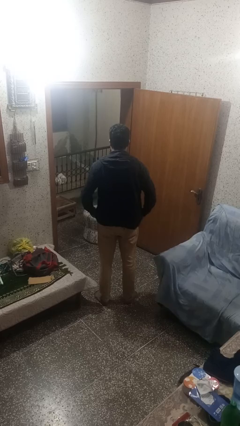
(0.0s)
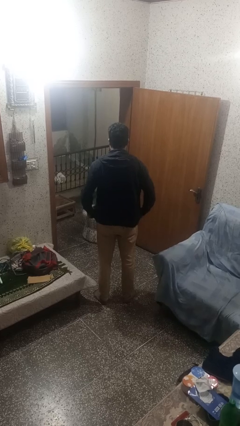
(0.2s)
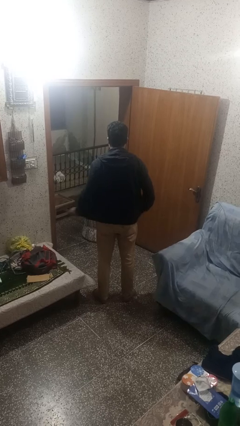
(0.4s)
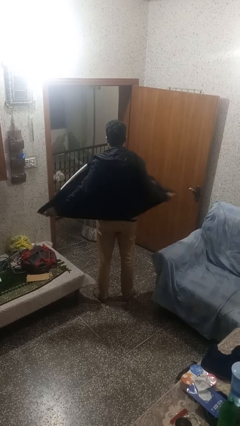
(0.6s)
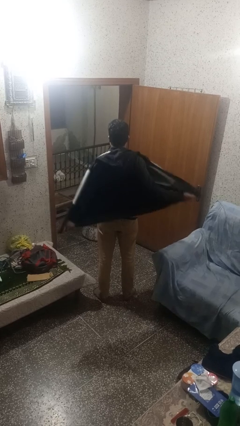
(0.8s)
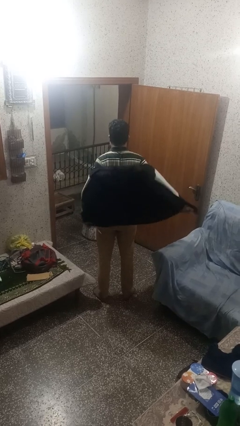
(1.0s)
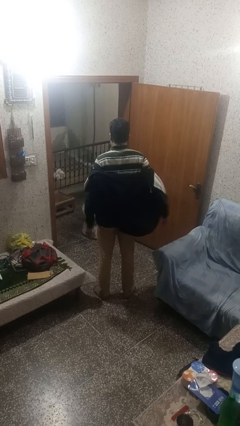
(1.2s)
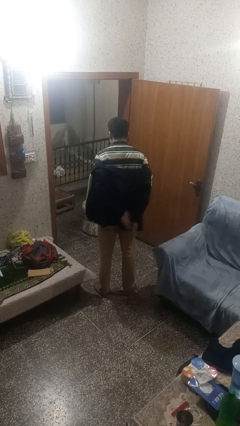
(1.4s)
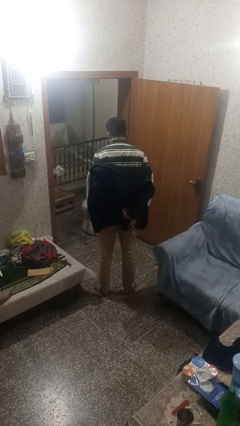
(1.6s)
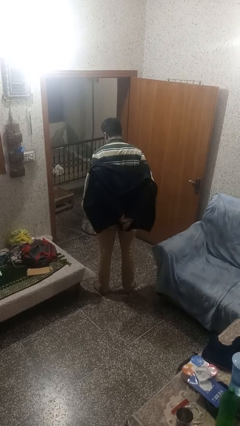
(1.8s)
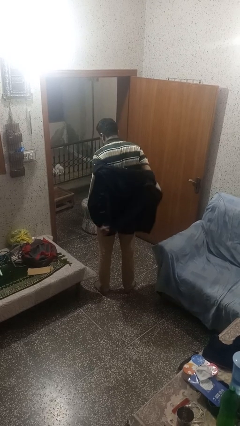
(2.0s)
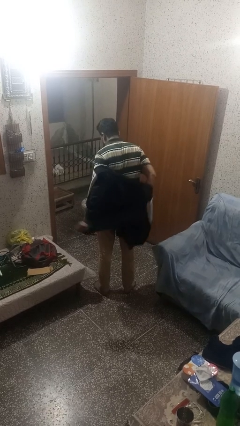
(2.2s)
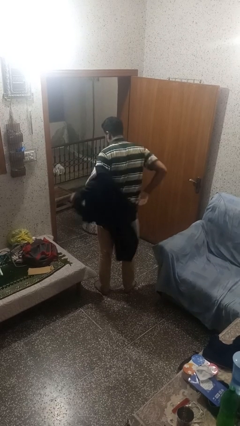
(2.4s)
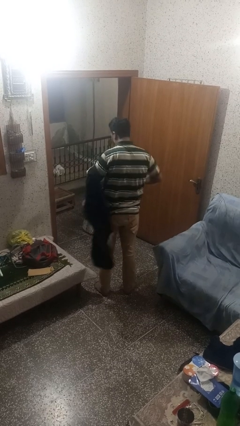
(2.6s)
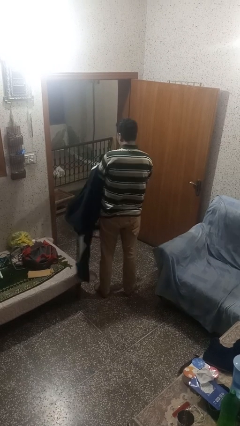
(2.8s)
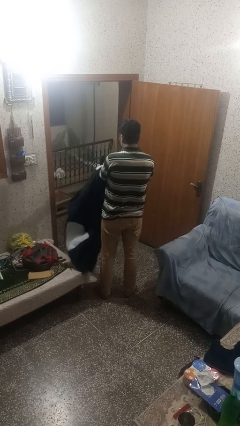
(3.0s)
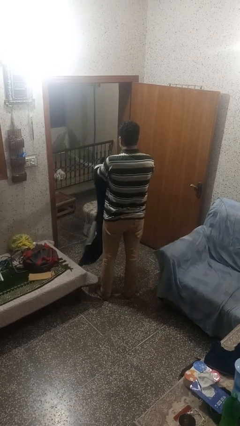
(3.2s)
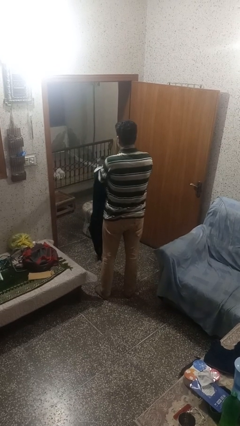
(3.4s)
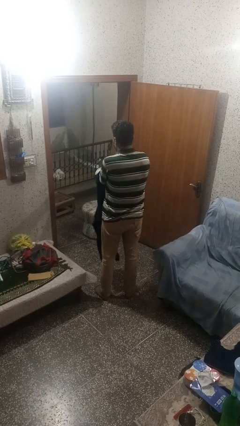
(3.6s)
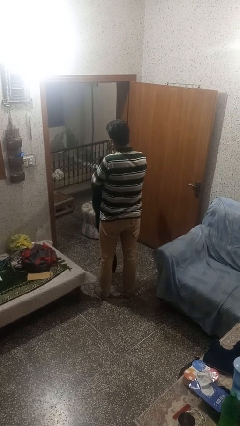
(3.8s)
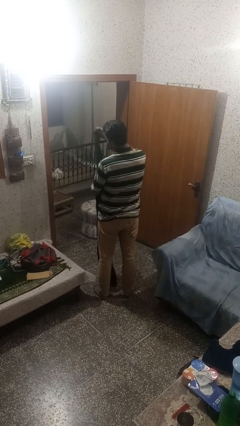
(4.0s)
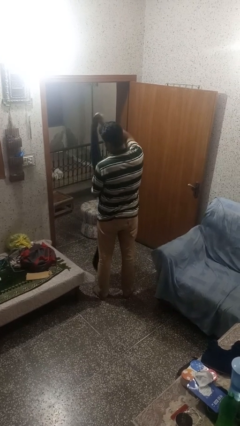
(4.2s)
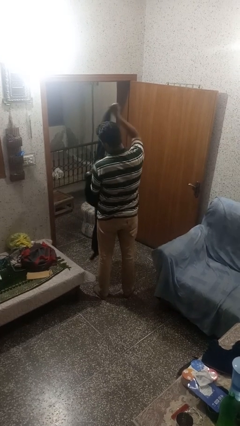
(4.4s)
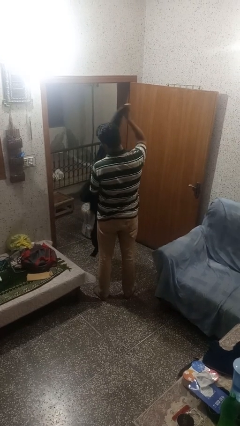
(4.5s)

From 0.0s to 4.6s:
person takes off jacket

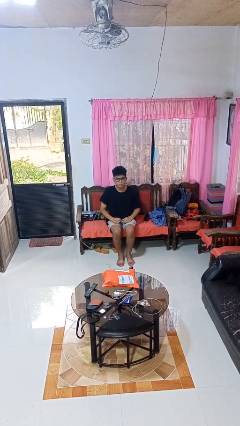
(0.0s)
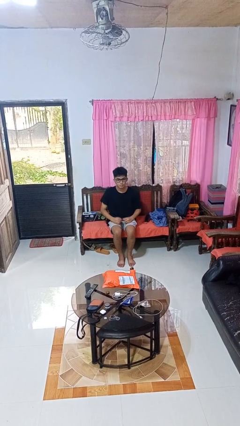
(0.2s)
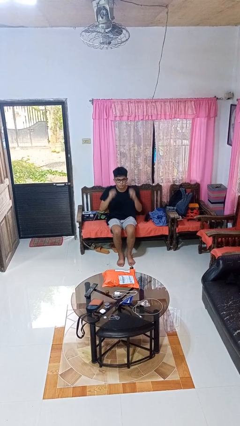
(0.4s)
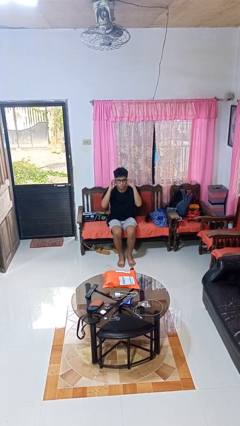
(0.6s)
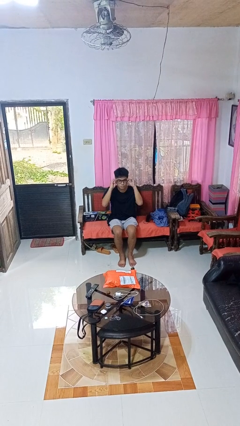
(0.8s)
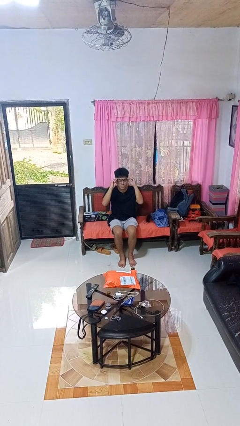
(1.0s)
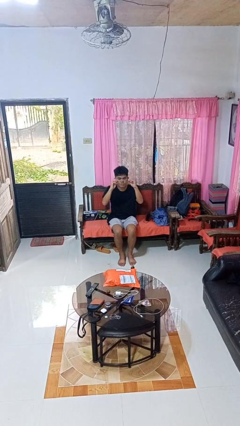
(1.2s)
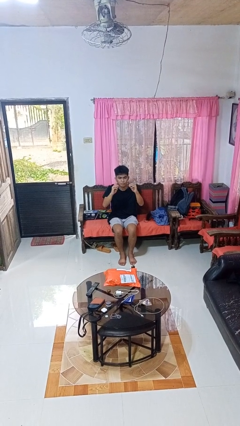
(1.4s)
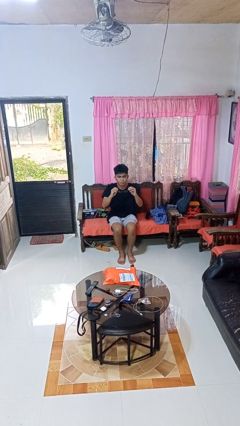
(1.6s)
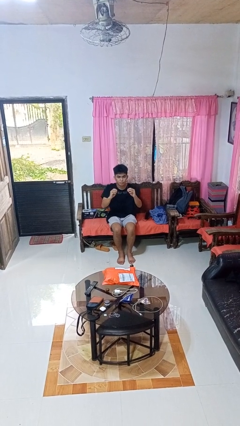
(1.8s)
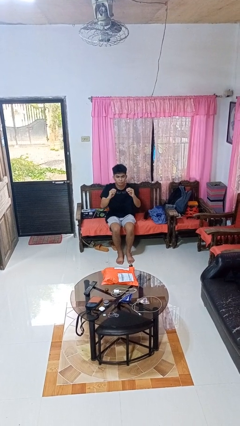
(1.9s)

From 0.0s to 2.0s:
person takes off glasses

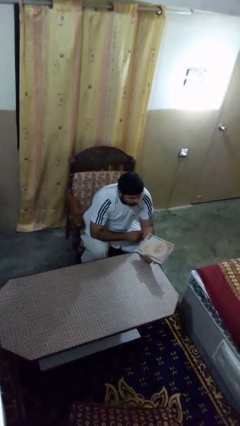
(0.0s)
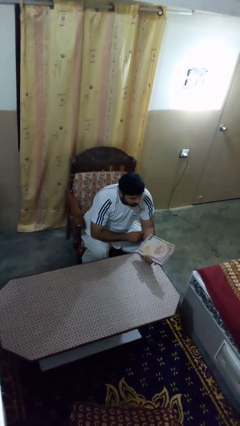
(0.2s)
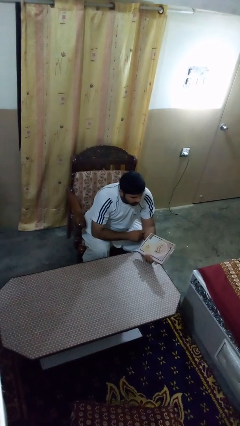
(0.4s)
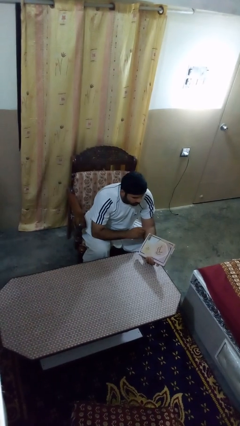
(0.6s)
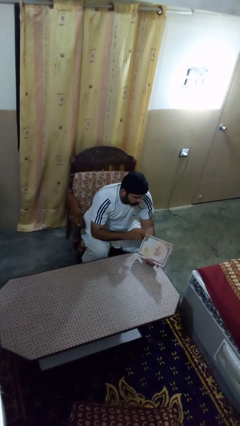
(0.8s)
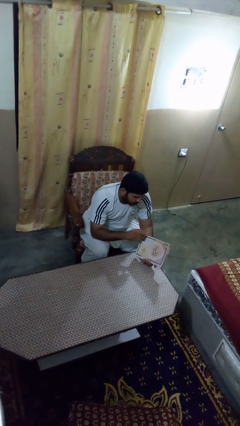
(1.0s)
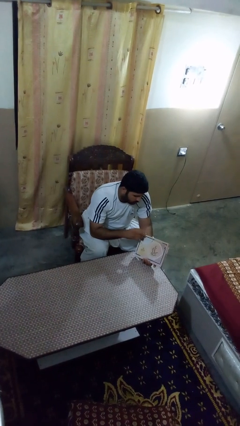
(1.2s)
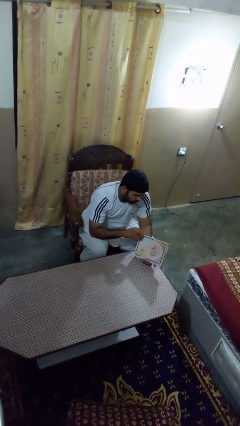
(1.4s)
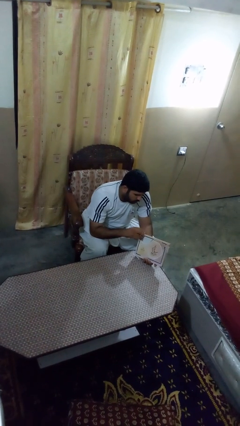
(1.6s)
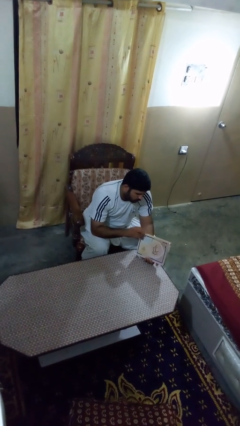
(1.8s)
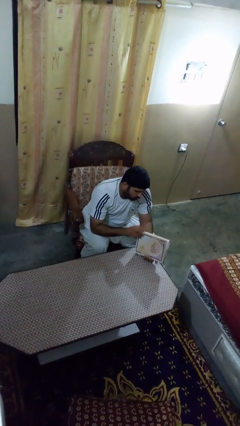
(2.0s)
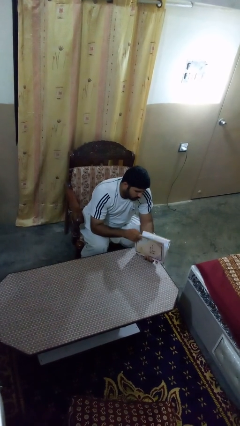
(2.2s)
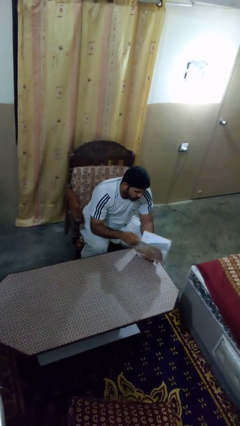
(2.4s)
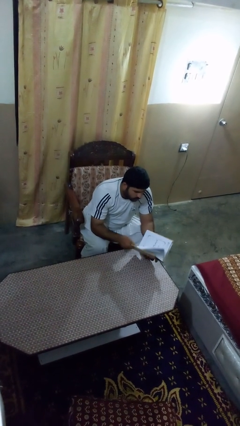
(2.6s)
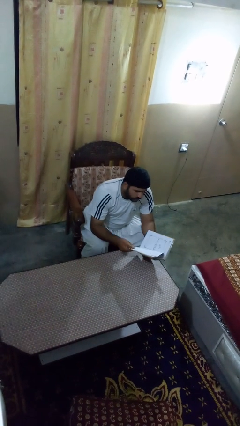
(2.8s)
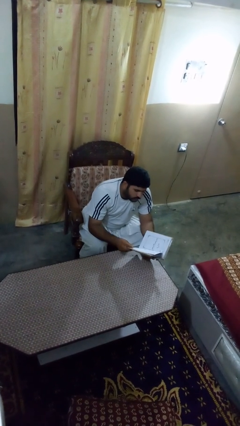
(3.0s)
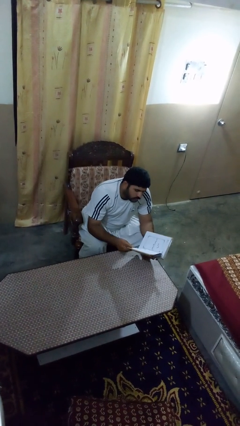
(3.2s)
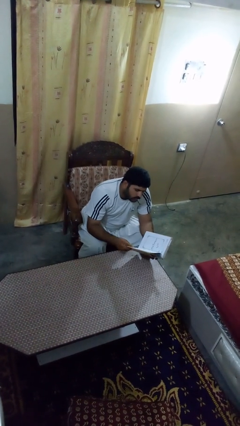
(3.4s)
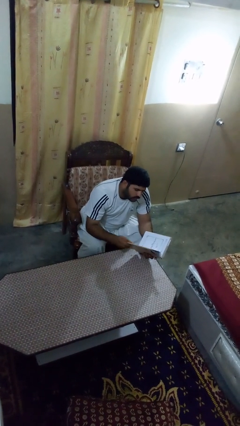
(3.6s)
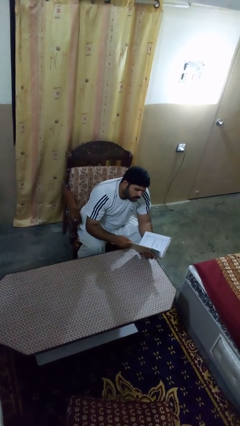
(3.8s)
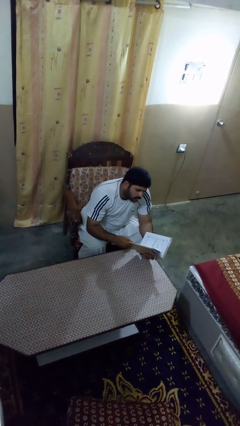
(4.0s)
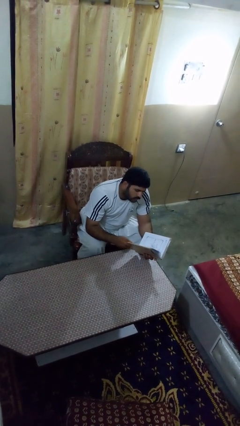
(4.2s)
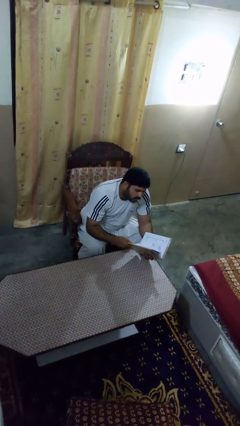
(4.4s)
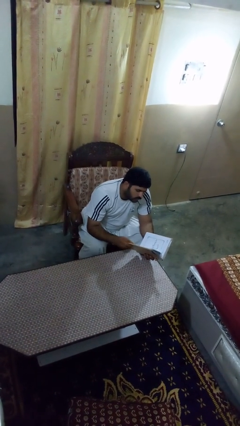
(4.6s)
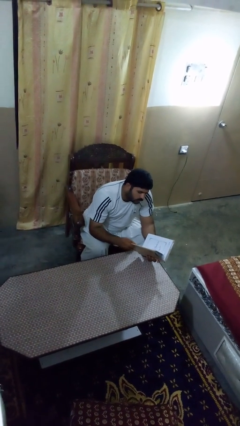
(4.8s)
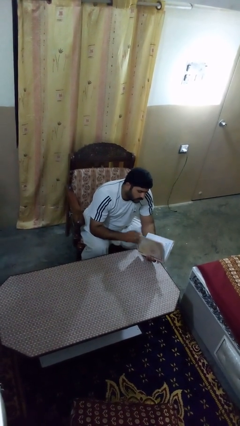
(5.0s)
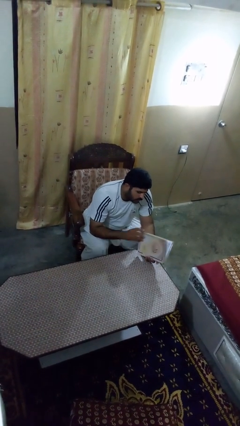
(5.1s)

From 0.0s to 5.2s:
person reads book

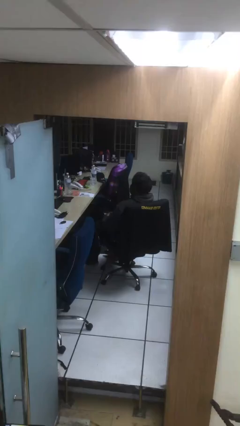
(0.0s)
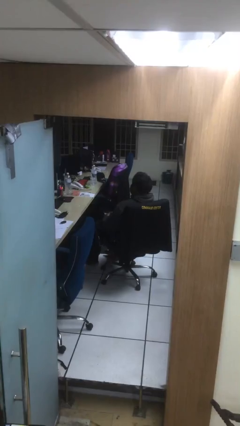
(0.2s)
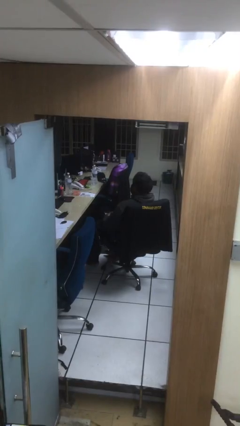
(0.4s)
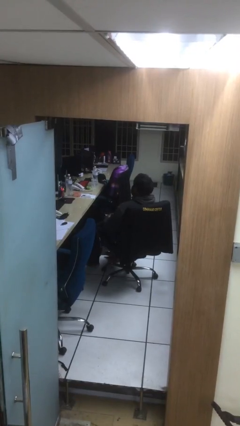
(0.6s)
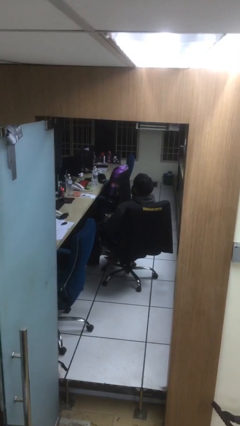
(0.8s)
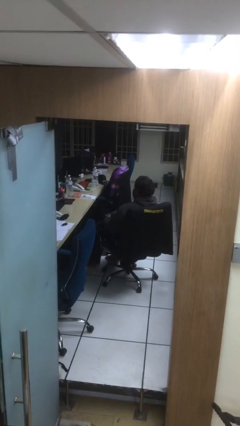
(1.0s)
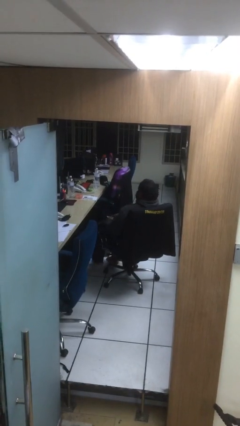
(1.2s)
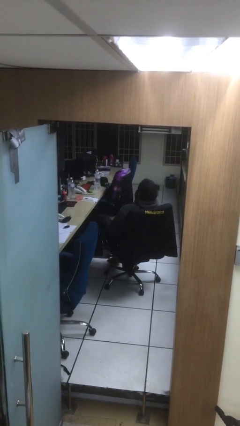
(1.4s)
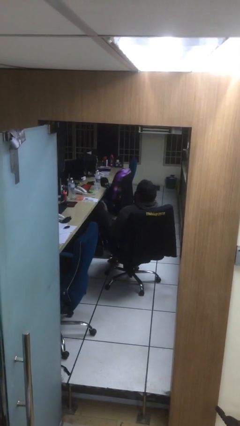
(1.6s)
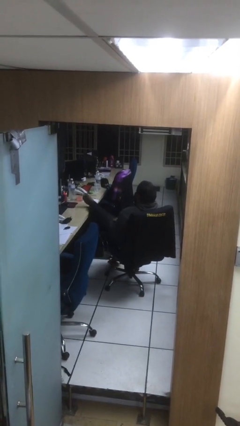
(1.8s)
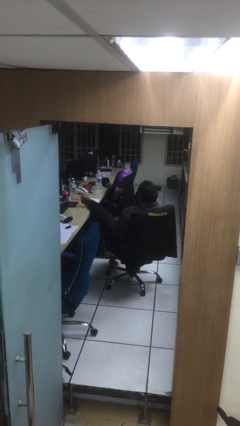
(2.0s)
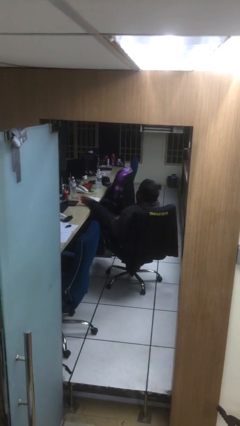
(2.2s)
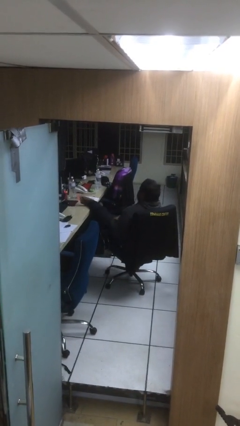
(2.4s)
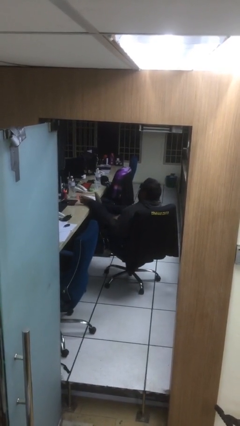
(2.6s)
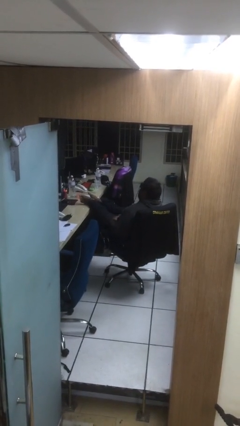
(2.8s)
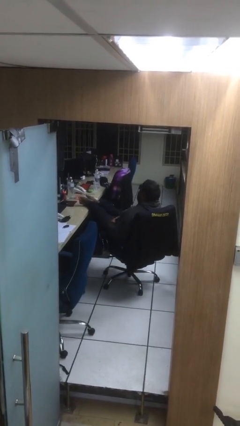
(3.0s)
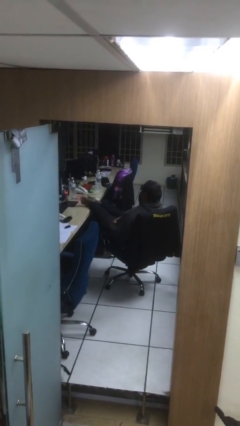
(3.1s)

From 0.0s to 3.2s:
person puts feet up

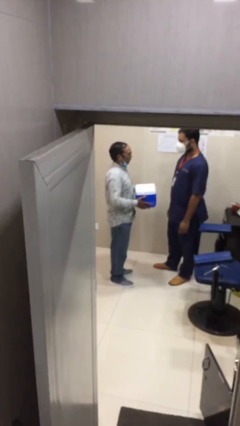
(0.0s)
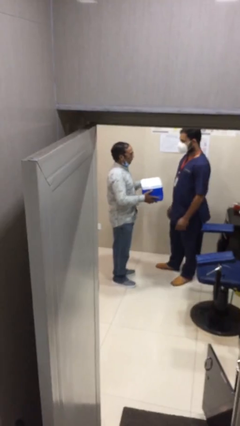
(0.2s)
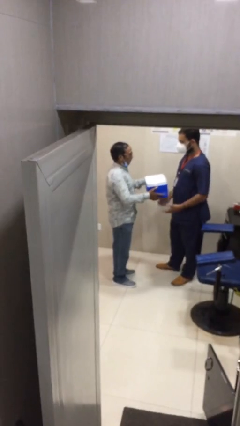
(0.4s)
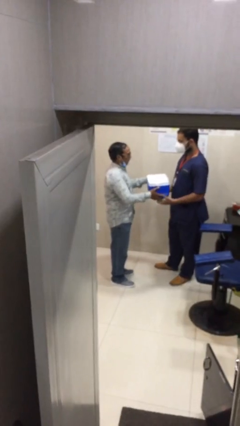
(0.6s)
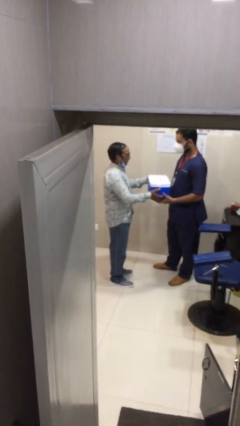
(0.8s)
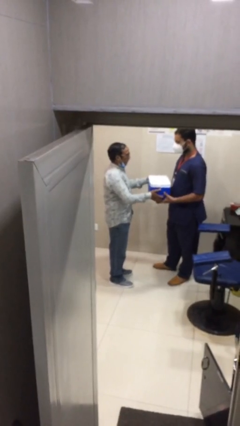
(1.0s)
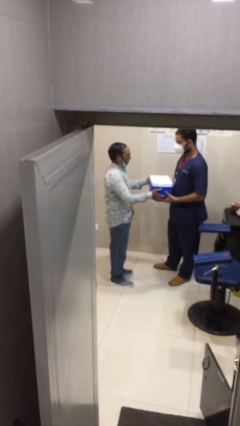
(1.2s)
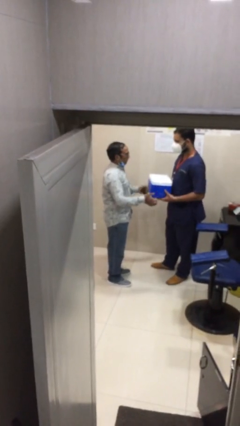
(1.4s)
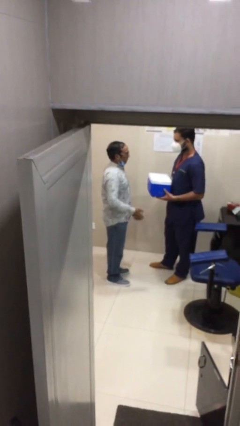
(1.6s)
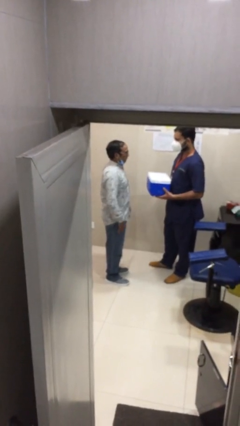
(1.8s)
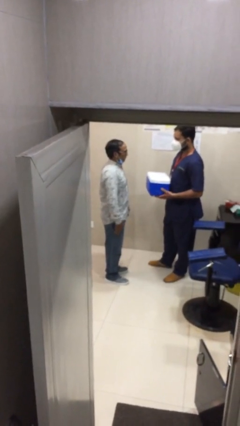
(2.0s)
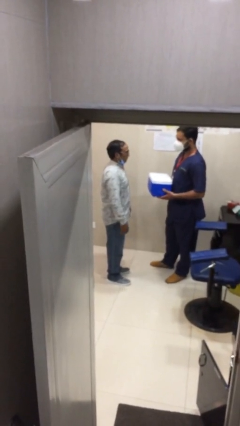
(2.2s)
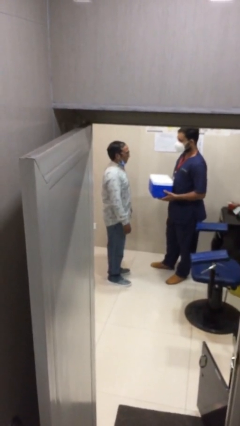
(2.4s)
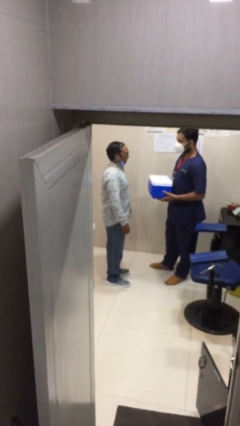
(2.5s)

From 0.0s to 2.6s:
person transfers object to person
